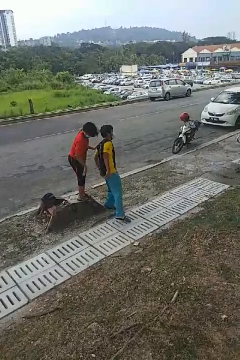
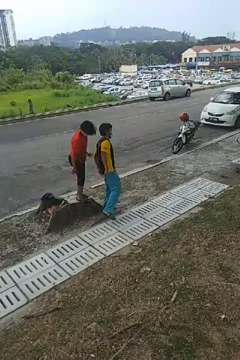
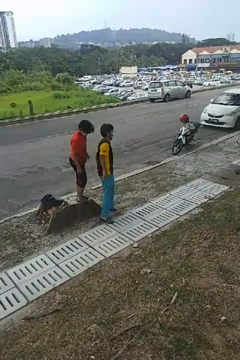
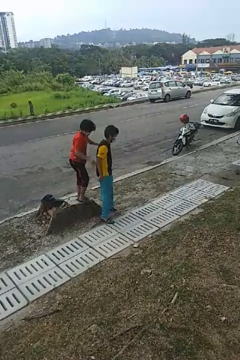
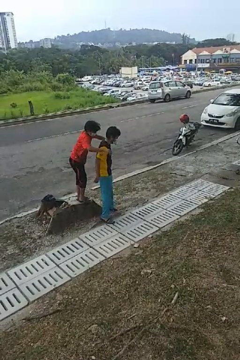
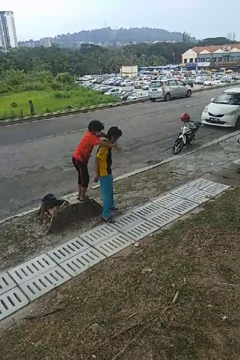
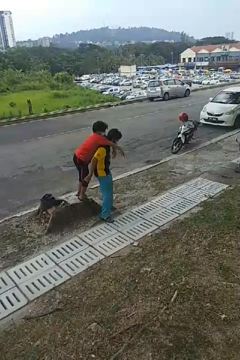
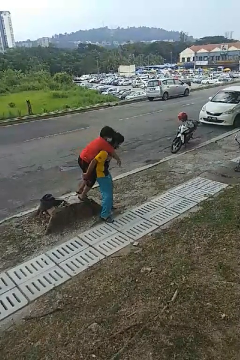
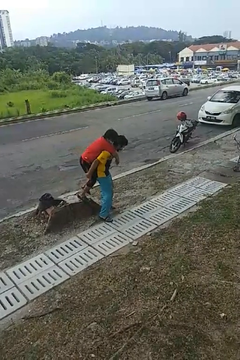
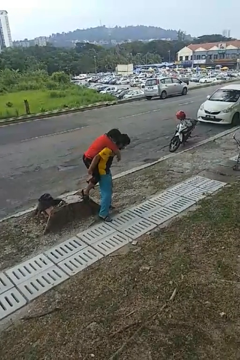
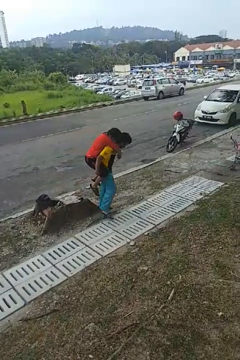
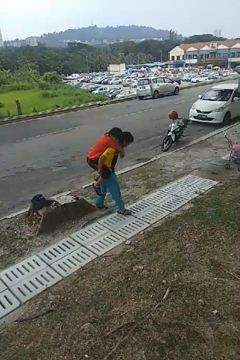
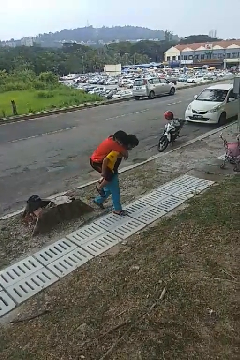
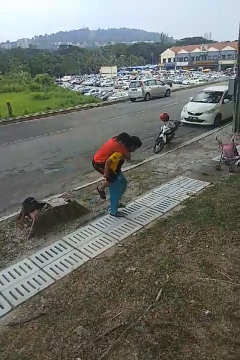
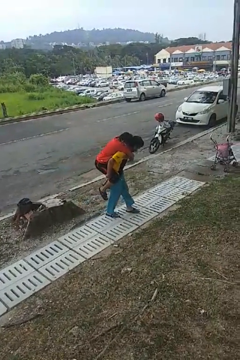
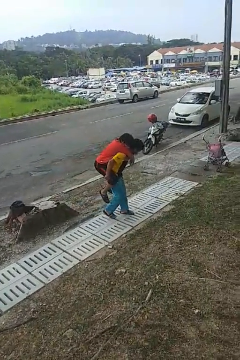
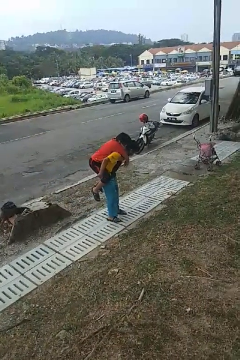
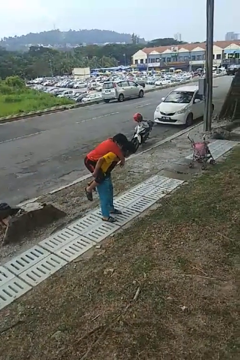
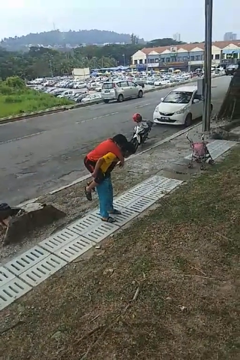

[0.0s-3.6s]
person carries person over shoulder

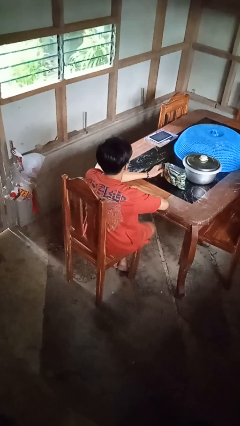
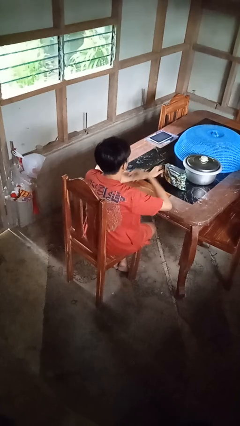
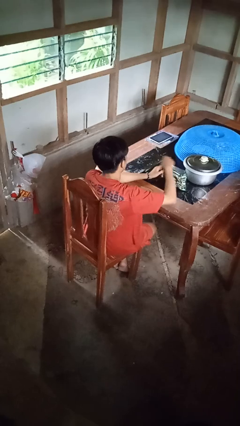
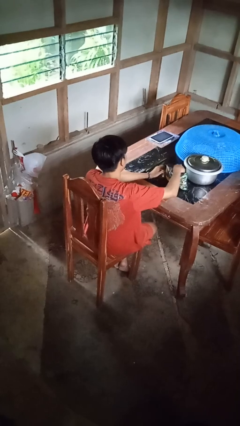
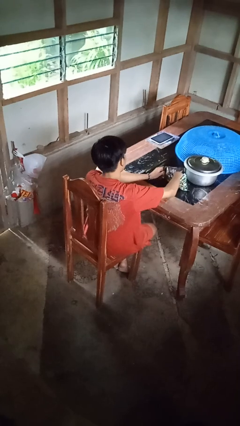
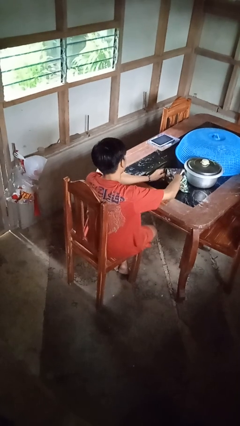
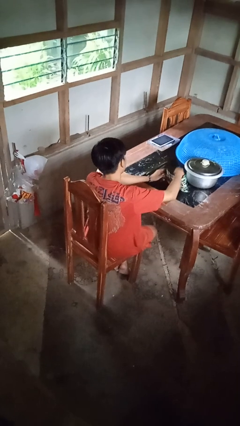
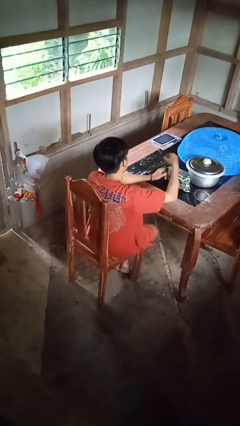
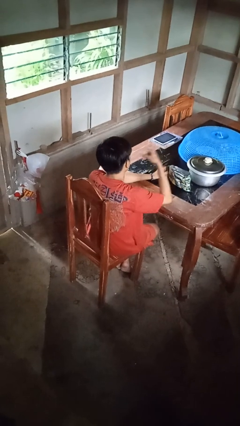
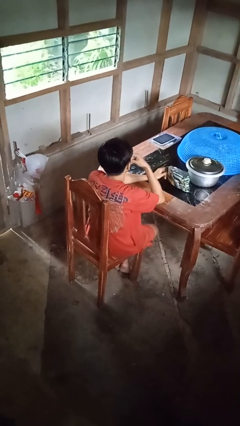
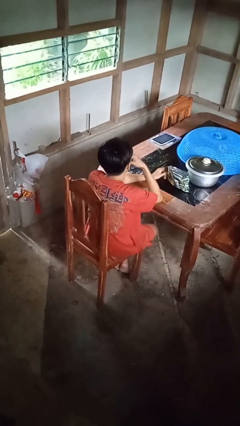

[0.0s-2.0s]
person eats snack from bag

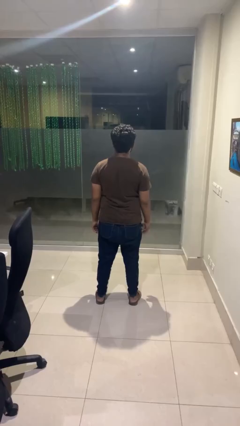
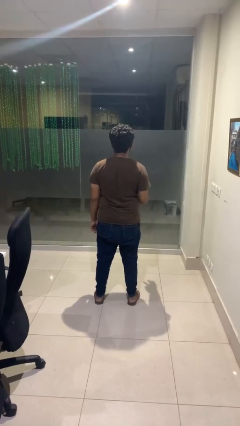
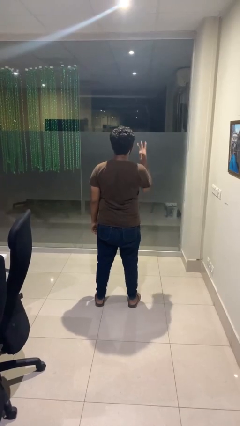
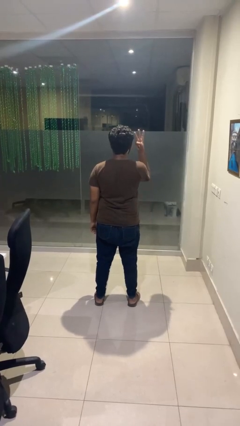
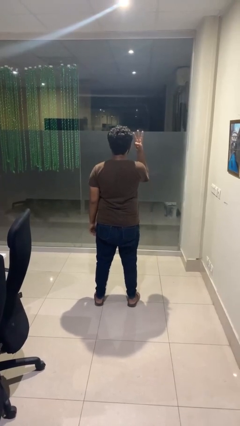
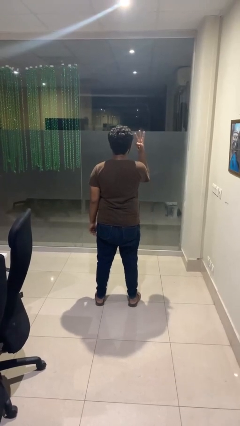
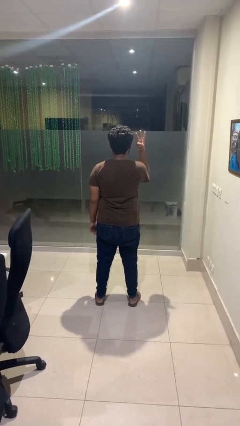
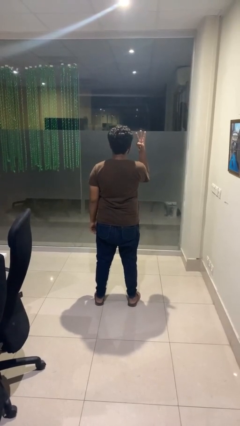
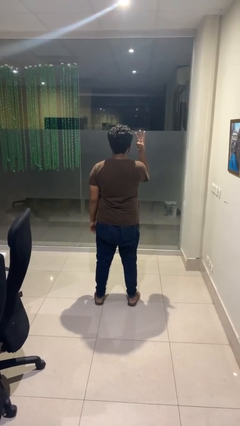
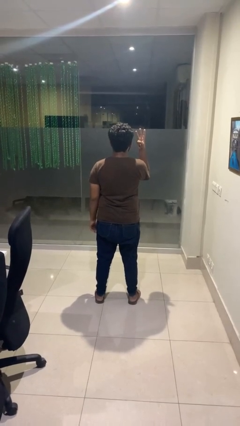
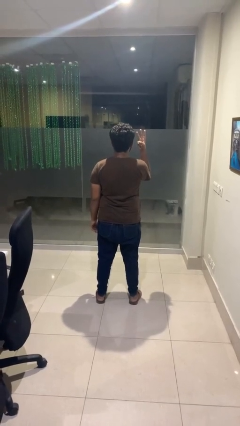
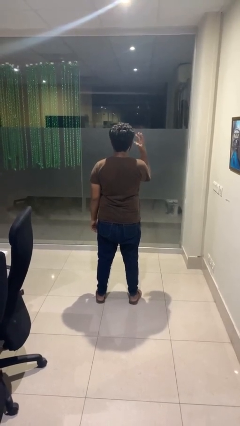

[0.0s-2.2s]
person gestures number three

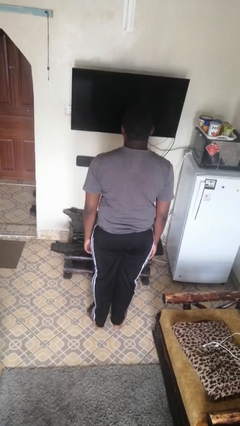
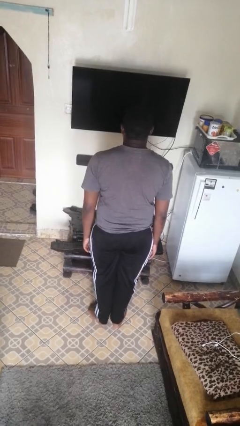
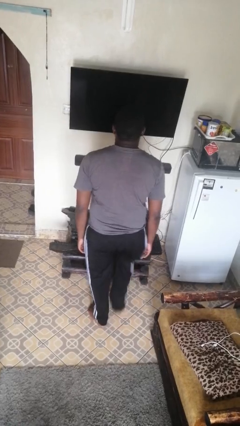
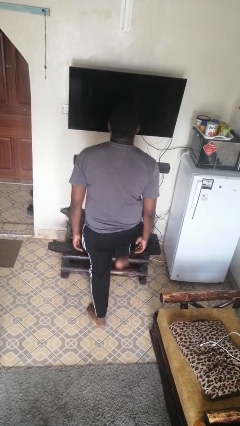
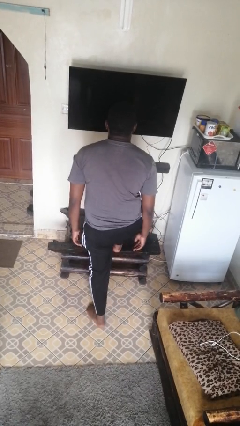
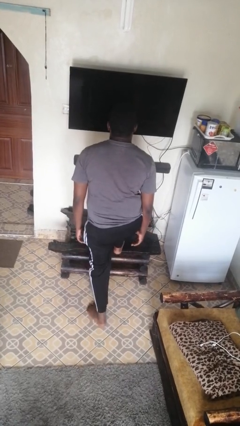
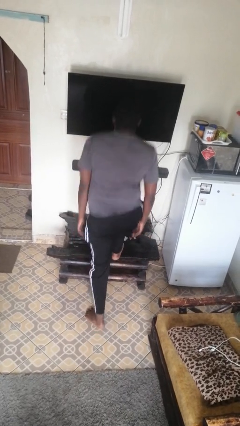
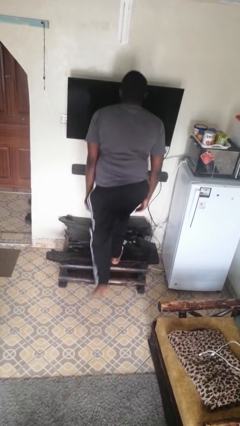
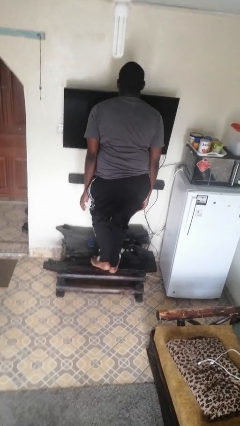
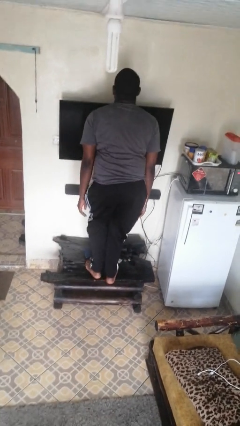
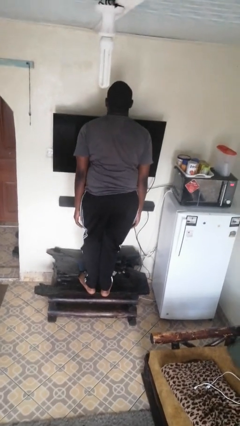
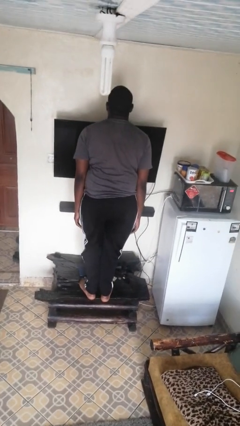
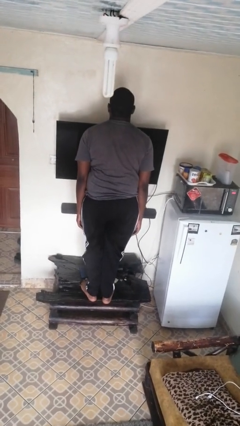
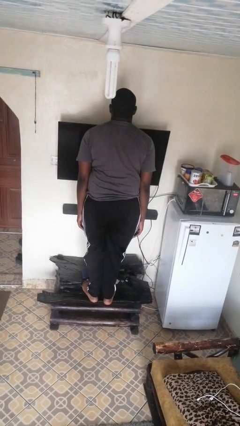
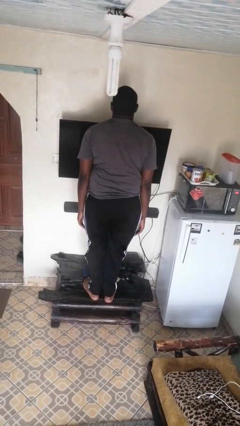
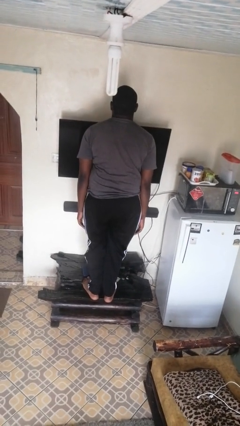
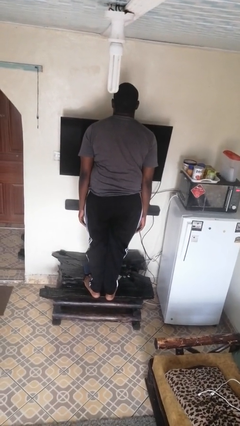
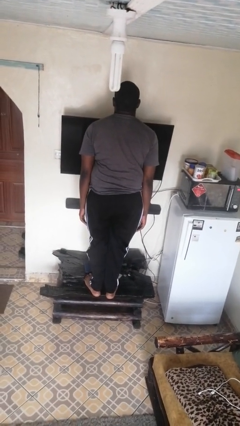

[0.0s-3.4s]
person climbs on table

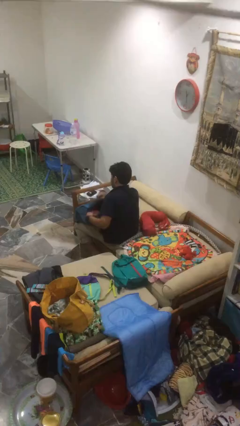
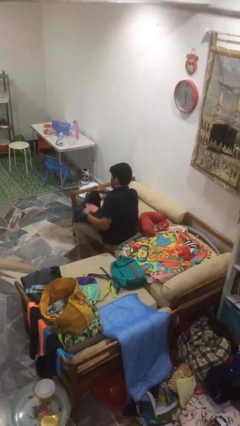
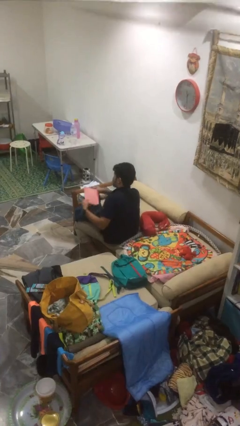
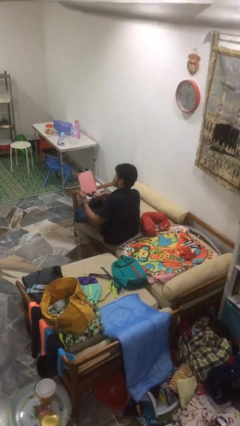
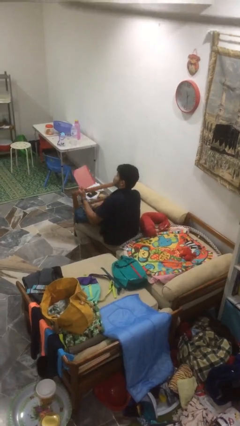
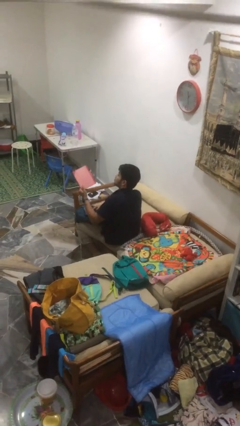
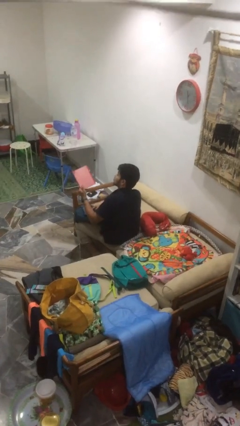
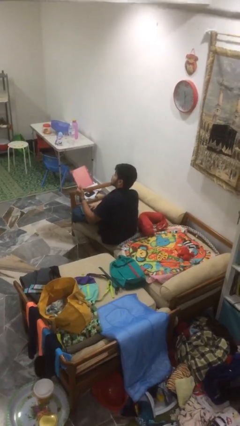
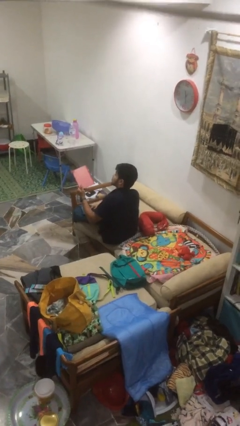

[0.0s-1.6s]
person takes object from bag

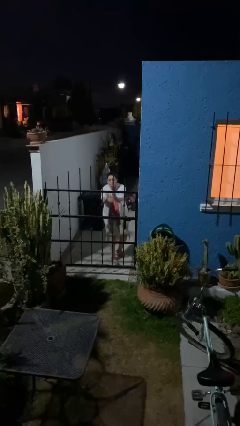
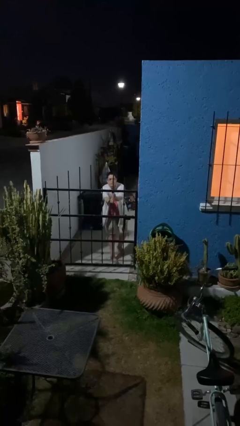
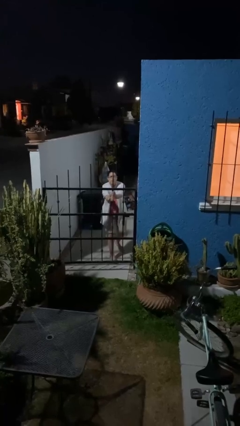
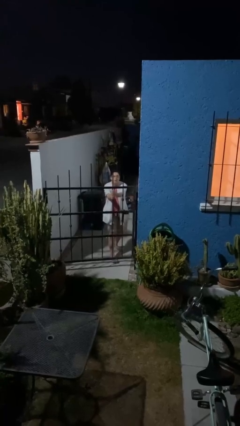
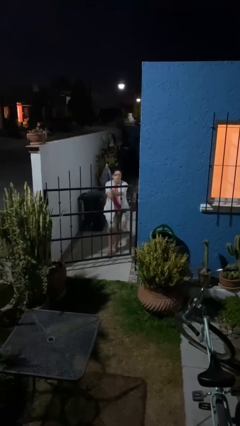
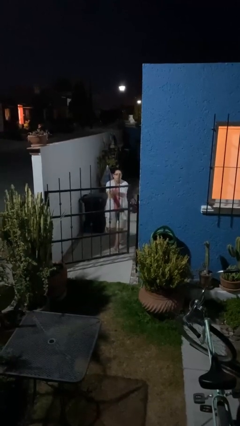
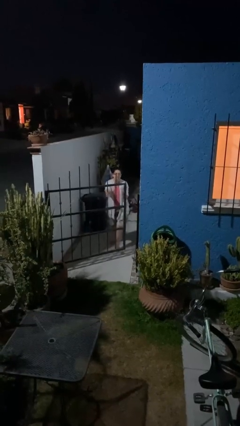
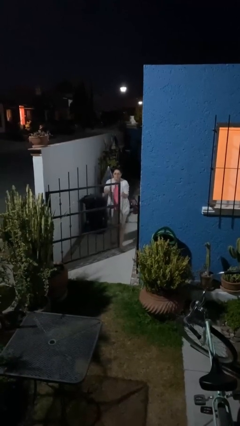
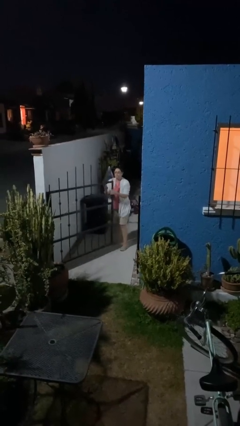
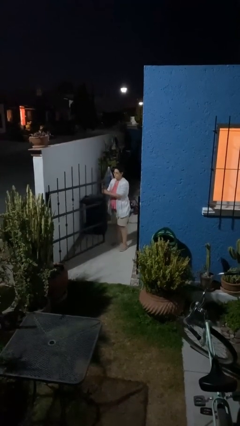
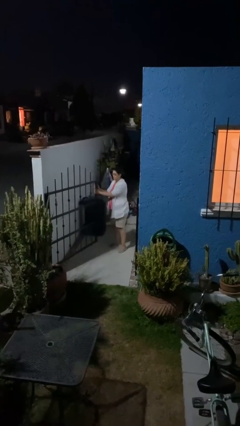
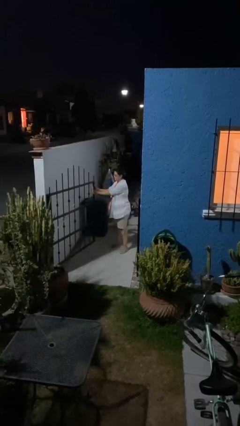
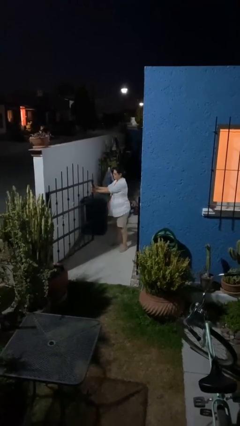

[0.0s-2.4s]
person opens facility door

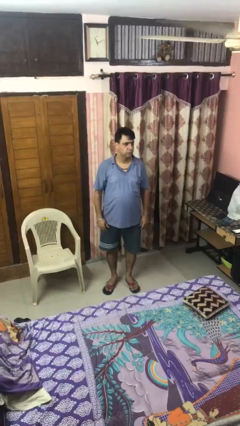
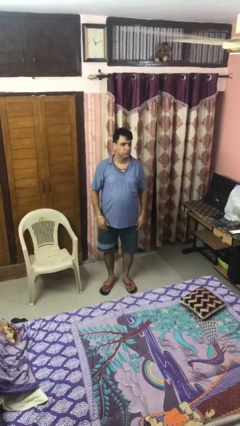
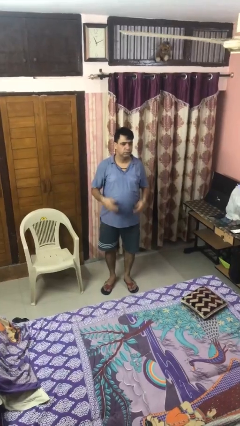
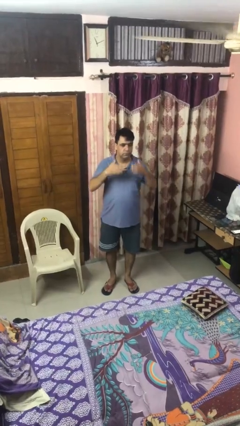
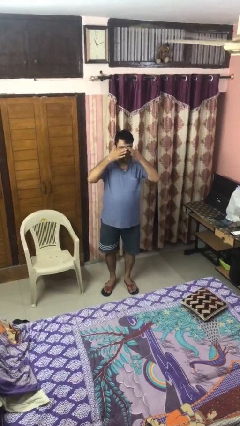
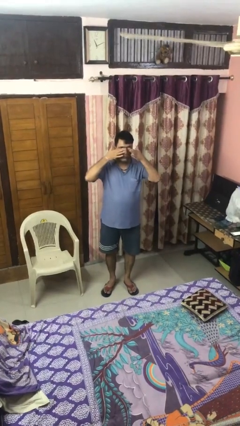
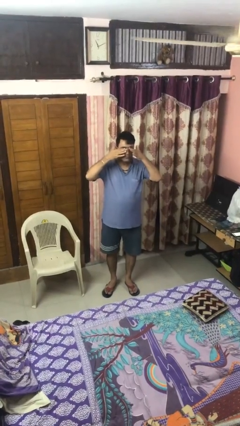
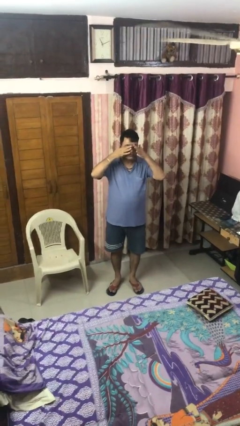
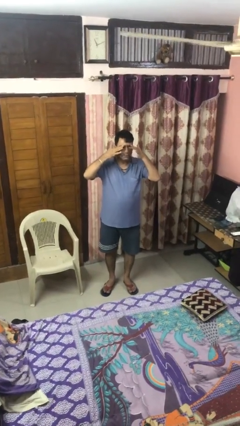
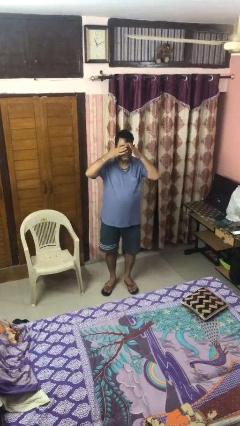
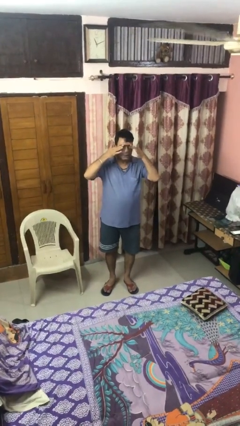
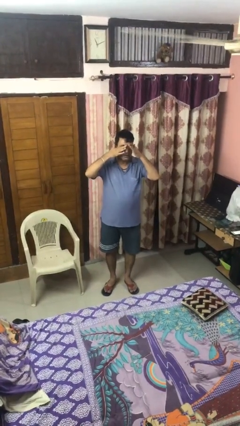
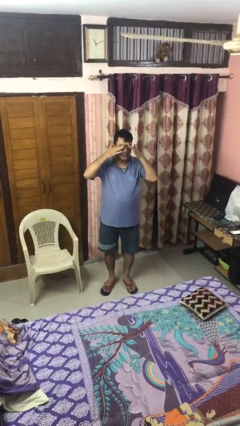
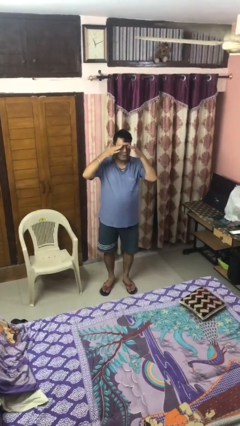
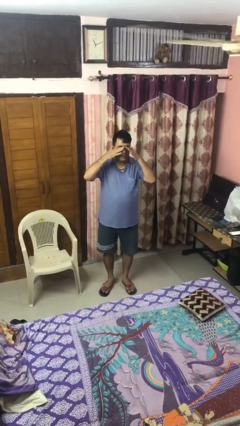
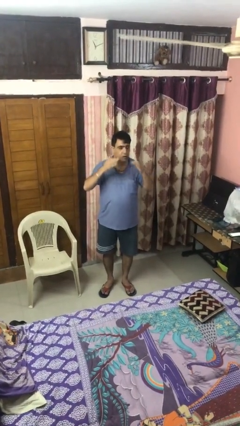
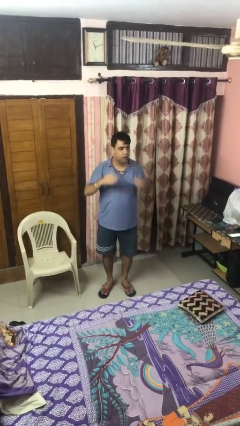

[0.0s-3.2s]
person rubs eyes
